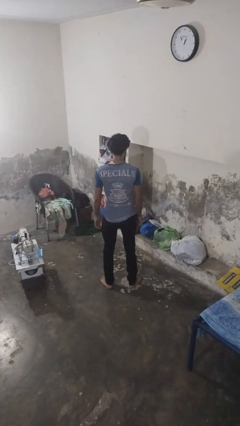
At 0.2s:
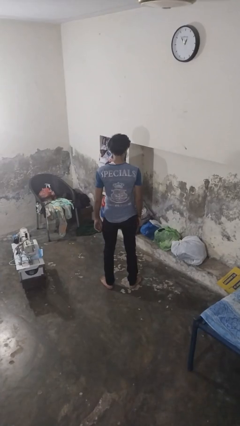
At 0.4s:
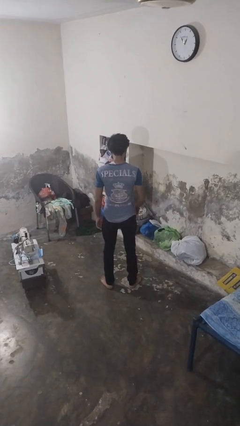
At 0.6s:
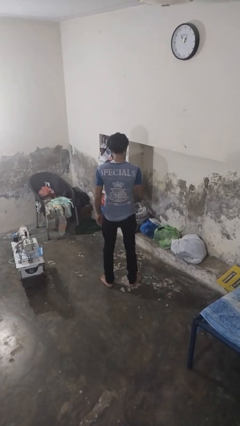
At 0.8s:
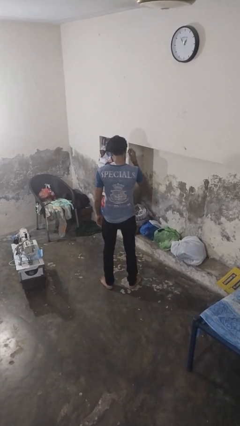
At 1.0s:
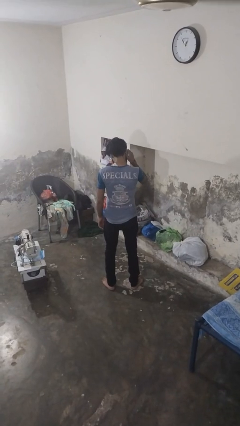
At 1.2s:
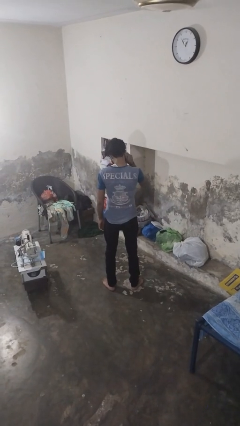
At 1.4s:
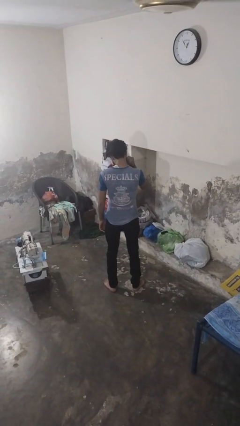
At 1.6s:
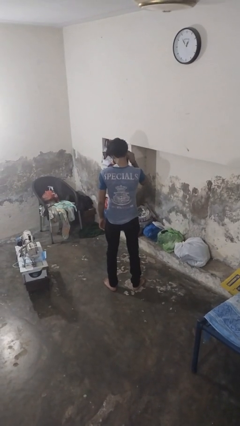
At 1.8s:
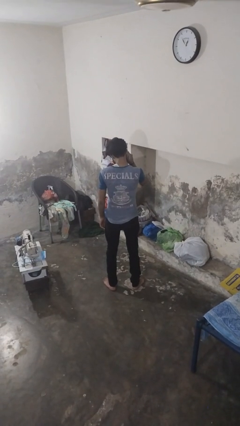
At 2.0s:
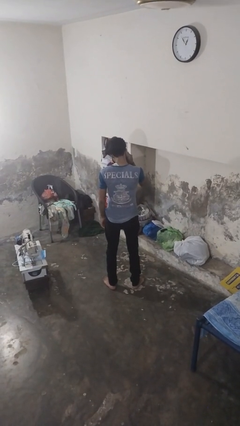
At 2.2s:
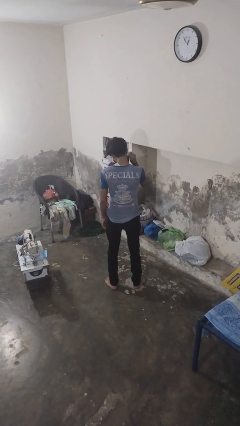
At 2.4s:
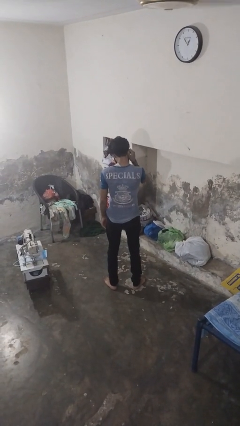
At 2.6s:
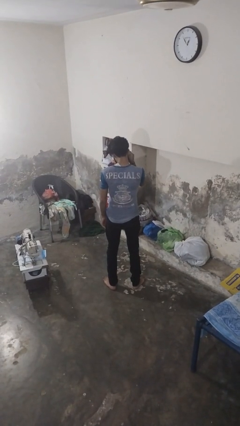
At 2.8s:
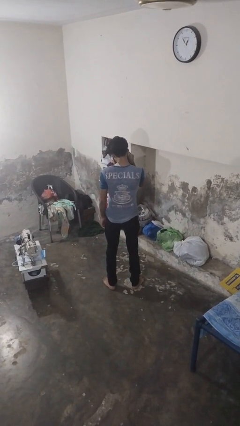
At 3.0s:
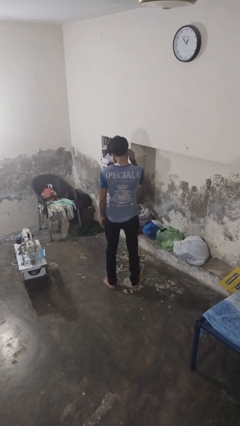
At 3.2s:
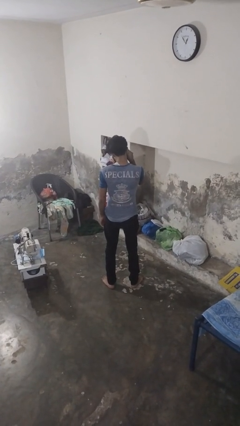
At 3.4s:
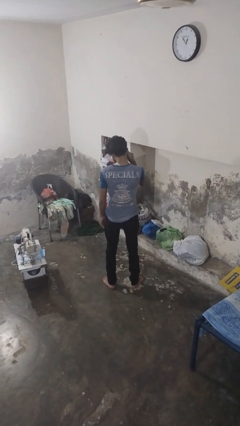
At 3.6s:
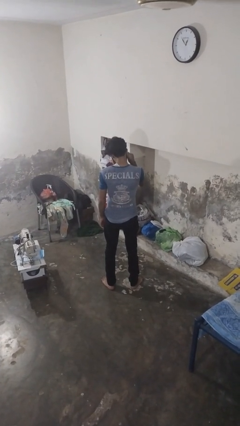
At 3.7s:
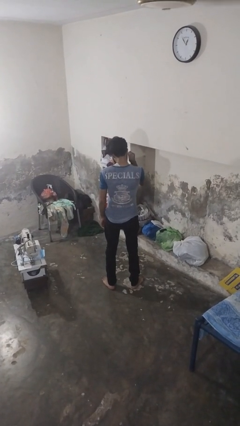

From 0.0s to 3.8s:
person touches earlobe

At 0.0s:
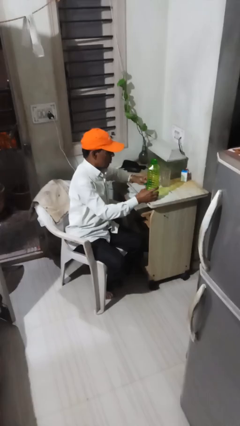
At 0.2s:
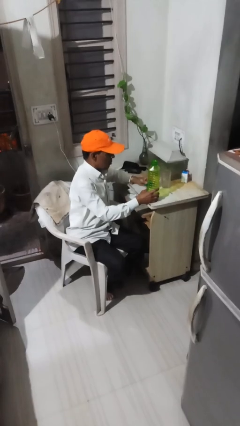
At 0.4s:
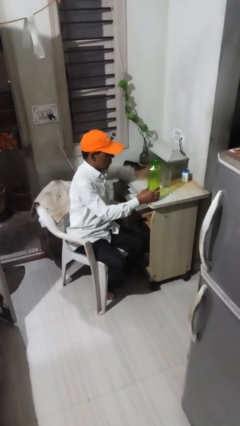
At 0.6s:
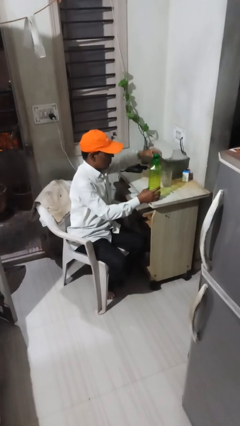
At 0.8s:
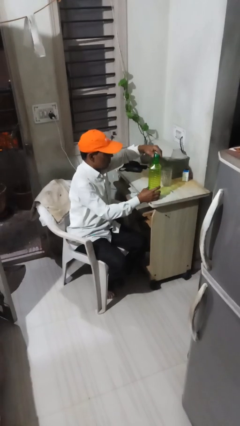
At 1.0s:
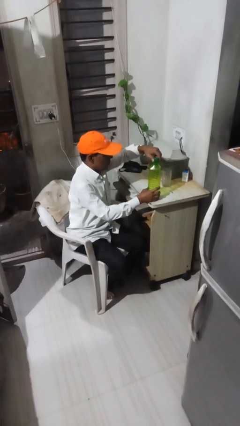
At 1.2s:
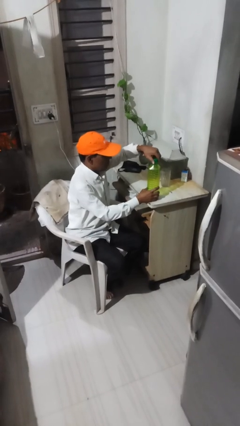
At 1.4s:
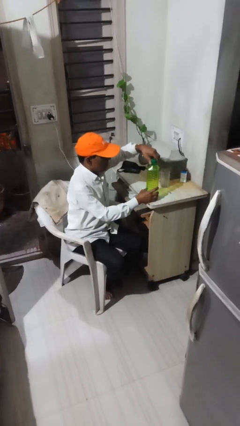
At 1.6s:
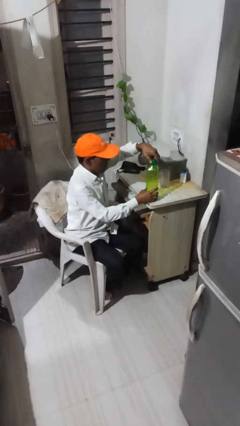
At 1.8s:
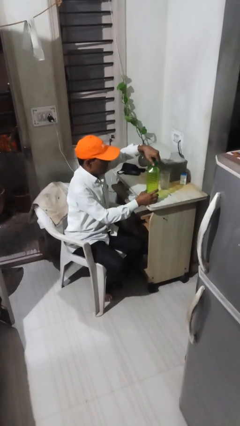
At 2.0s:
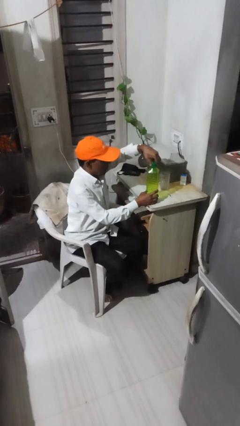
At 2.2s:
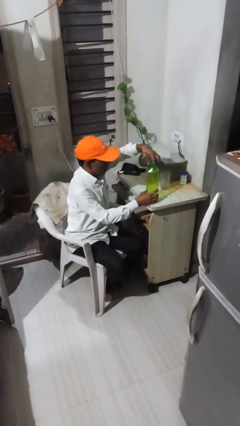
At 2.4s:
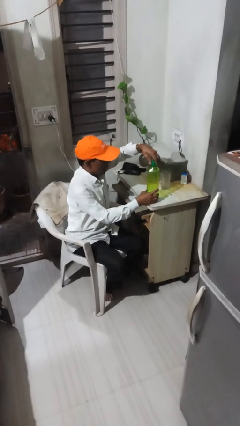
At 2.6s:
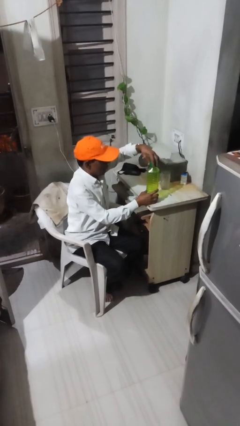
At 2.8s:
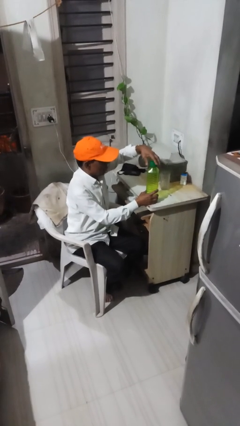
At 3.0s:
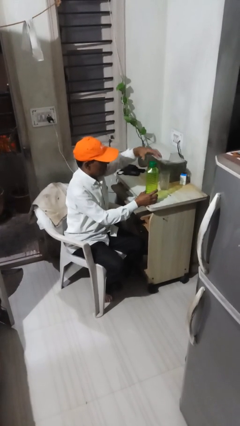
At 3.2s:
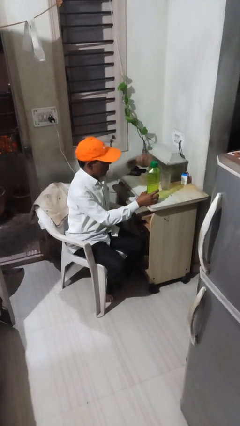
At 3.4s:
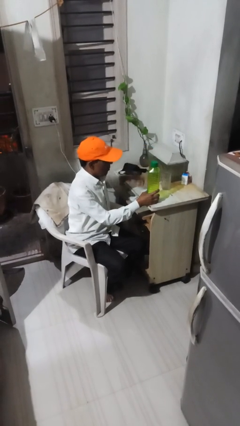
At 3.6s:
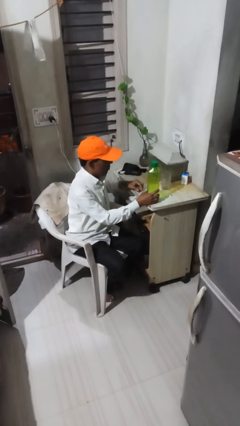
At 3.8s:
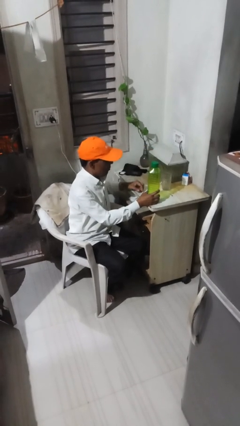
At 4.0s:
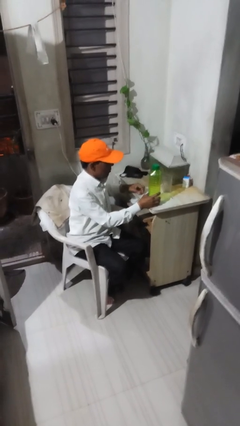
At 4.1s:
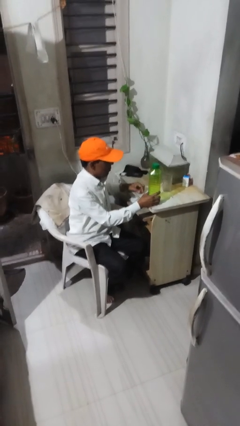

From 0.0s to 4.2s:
person screws lid to bottle

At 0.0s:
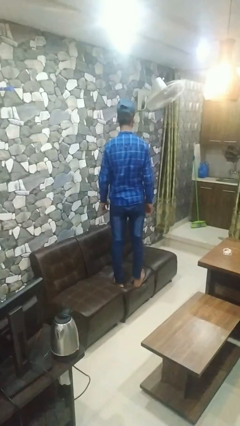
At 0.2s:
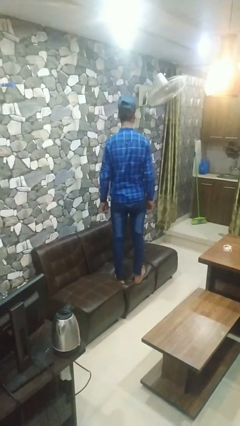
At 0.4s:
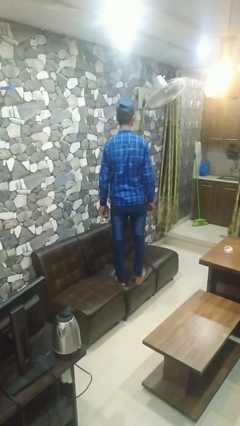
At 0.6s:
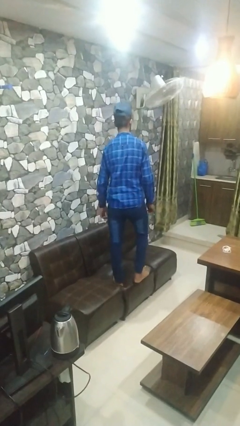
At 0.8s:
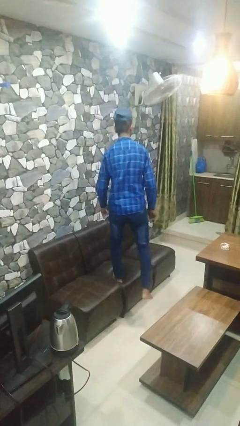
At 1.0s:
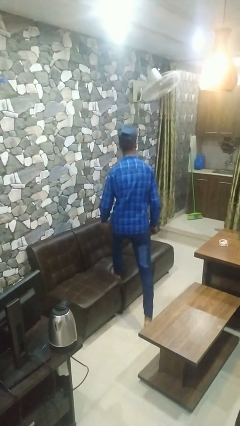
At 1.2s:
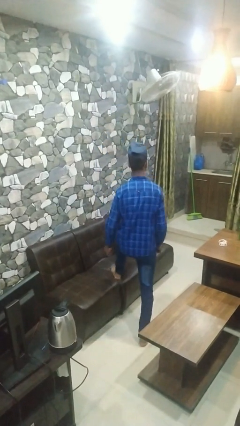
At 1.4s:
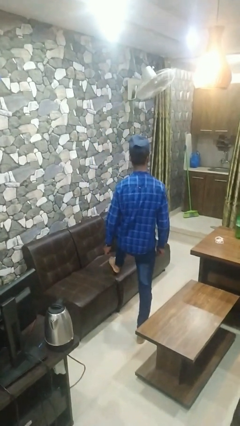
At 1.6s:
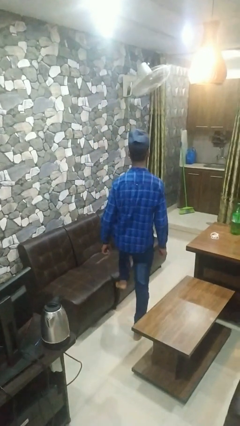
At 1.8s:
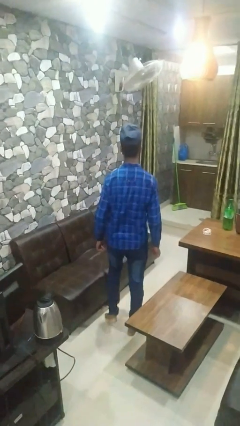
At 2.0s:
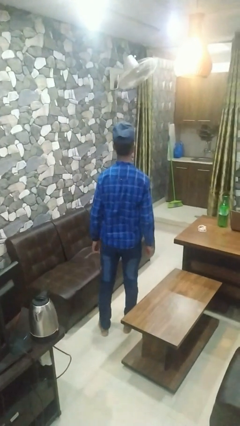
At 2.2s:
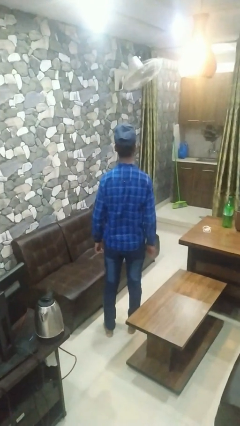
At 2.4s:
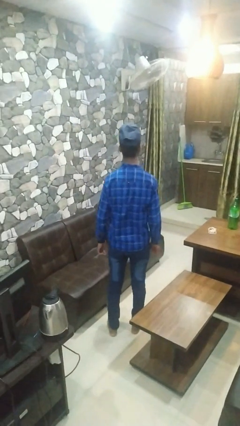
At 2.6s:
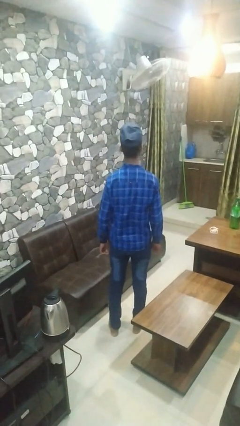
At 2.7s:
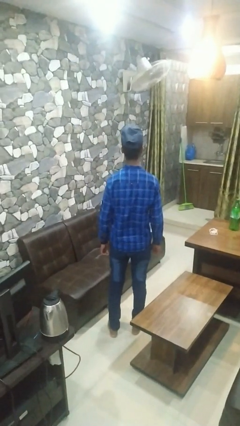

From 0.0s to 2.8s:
person climbs off couch

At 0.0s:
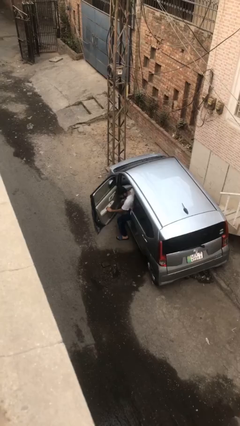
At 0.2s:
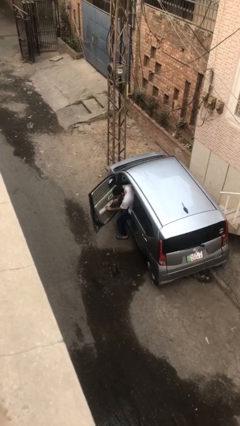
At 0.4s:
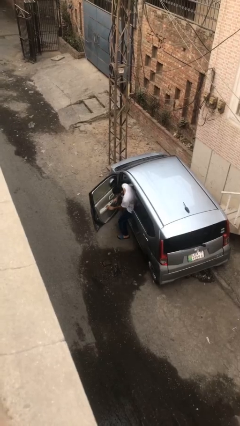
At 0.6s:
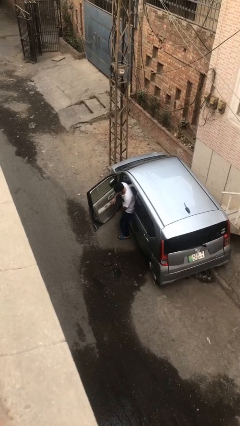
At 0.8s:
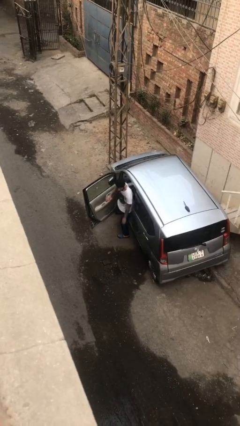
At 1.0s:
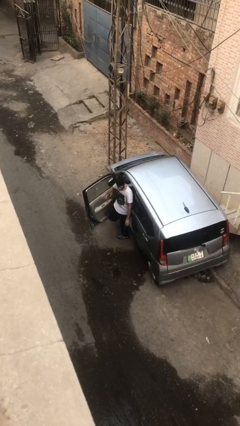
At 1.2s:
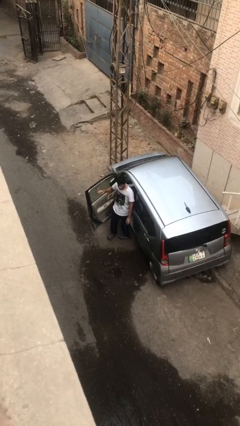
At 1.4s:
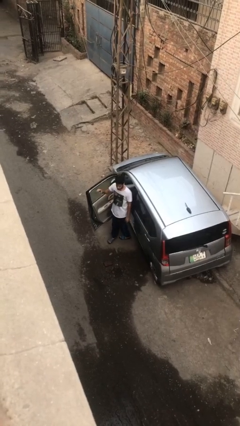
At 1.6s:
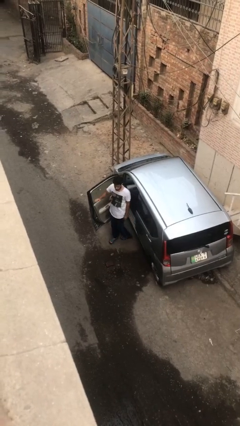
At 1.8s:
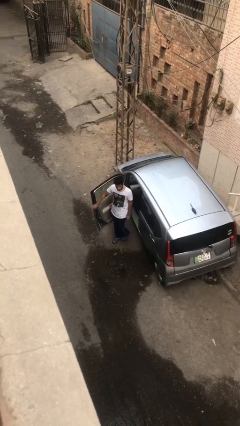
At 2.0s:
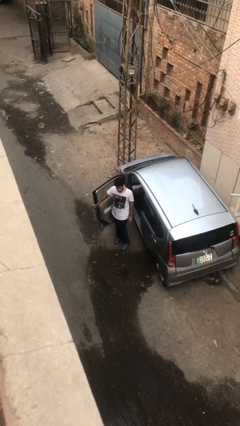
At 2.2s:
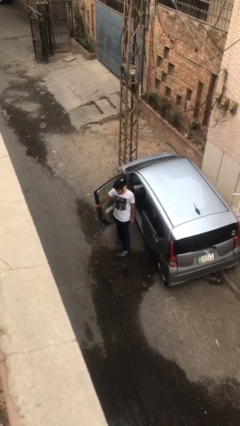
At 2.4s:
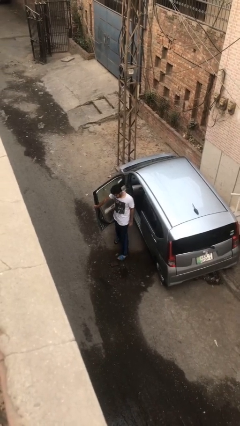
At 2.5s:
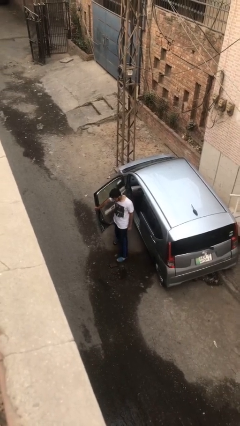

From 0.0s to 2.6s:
person exits car

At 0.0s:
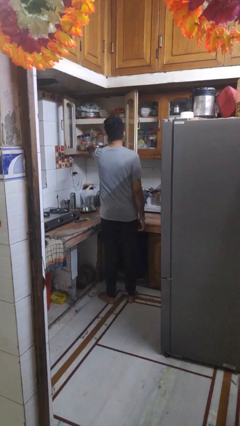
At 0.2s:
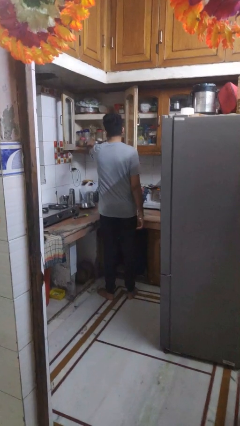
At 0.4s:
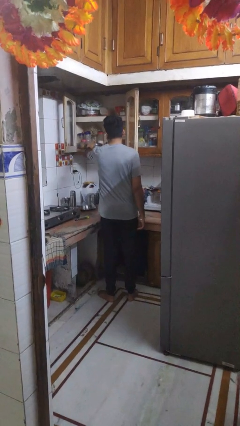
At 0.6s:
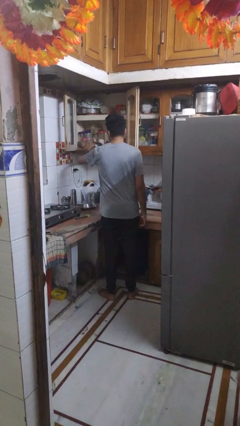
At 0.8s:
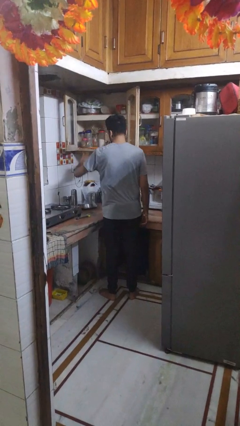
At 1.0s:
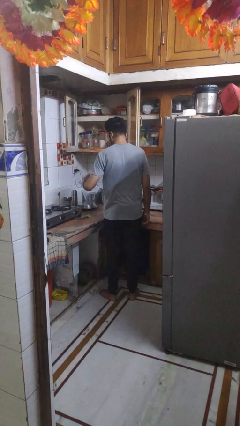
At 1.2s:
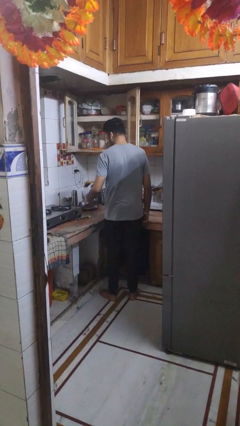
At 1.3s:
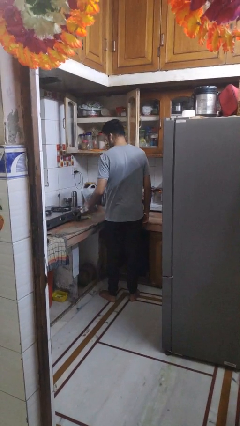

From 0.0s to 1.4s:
person takes object from cabinet

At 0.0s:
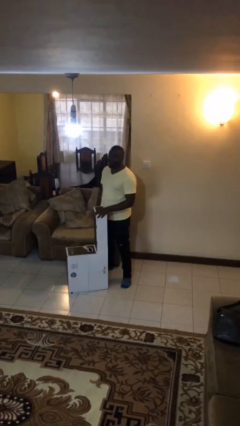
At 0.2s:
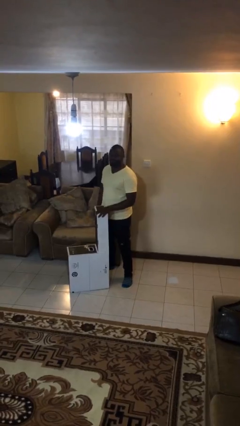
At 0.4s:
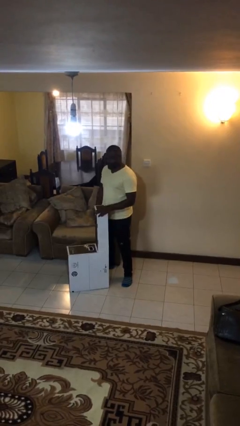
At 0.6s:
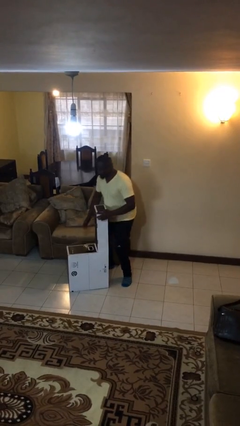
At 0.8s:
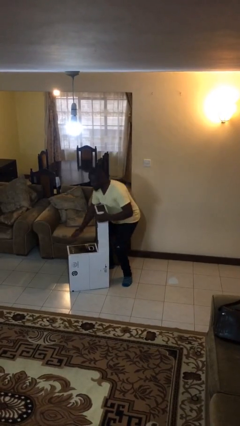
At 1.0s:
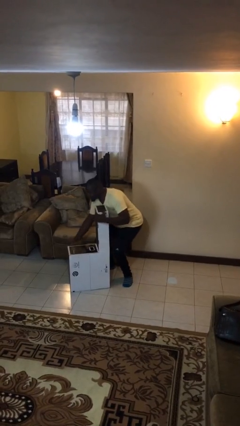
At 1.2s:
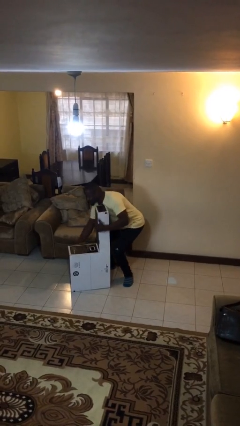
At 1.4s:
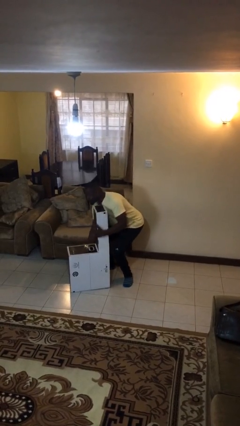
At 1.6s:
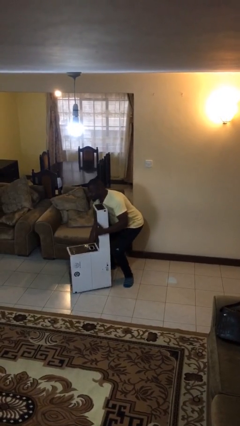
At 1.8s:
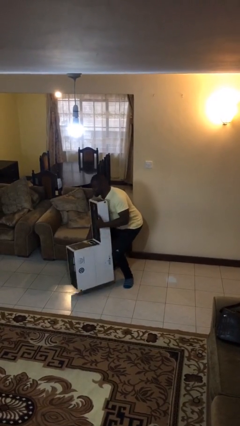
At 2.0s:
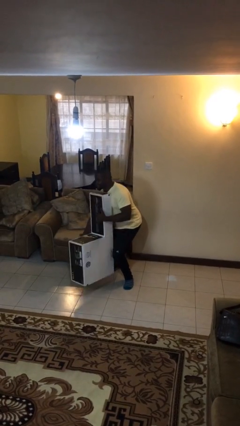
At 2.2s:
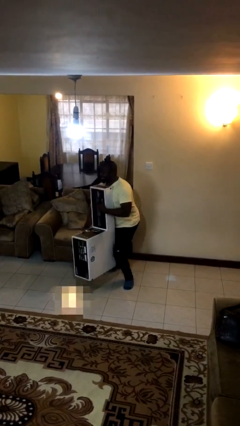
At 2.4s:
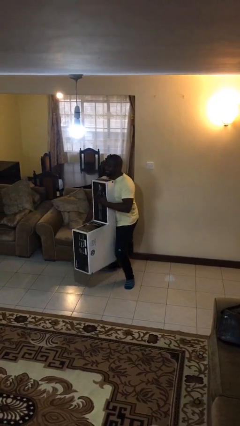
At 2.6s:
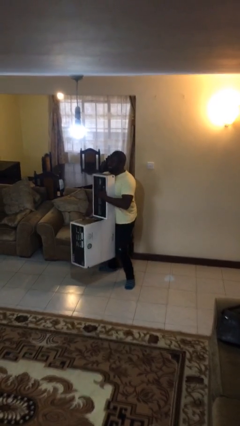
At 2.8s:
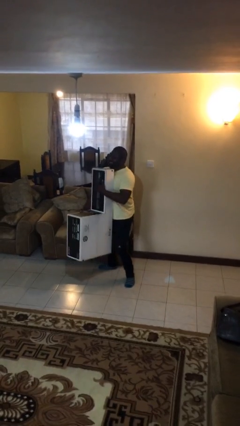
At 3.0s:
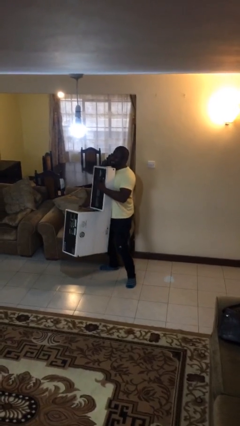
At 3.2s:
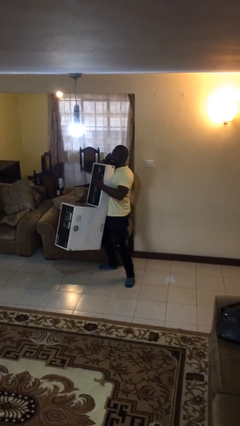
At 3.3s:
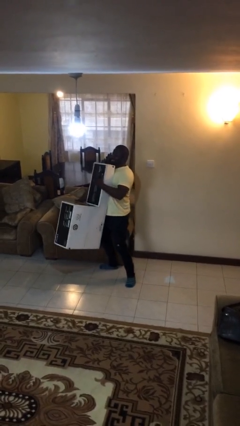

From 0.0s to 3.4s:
person picks up object from floor
